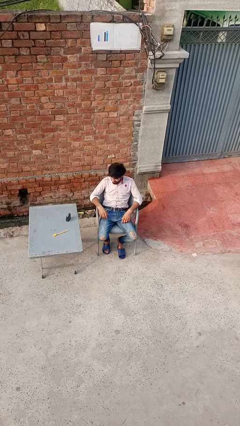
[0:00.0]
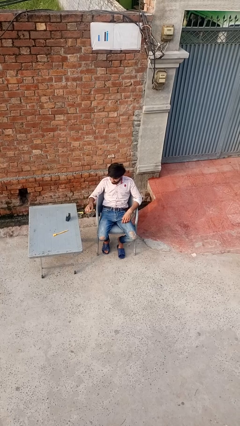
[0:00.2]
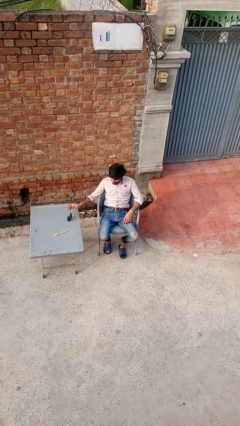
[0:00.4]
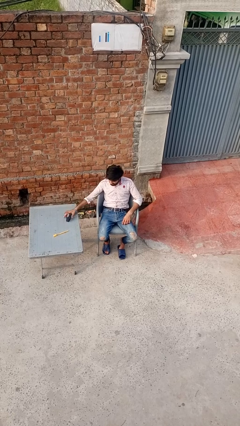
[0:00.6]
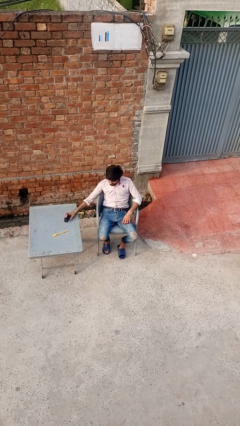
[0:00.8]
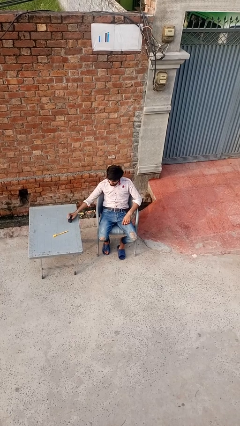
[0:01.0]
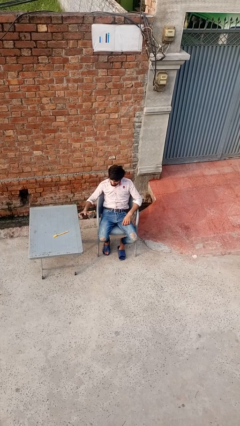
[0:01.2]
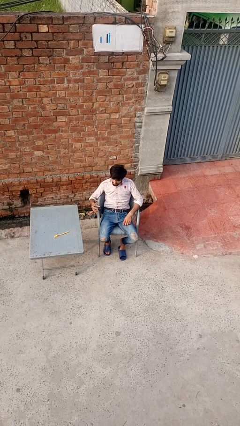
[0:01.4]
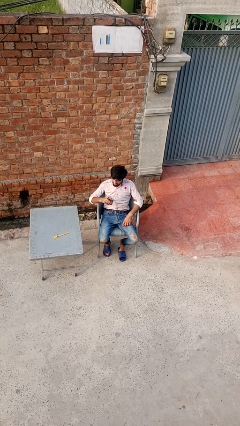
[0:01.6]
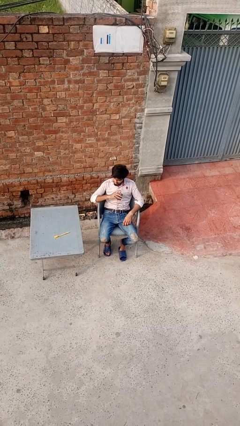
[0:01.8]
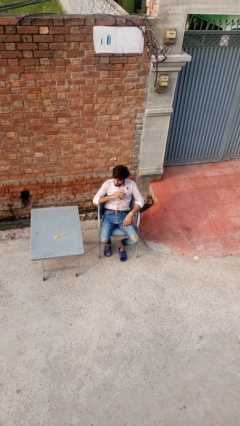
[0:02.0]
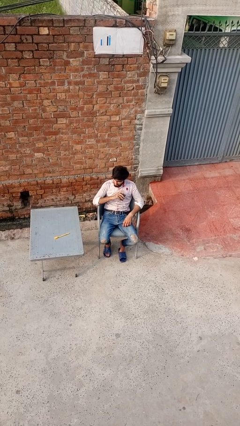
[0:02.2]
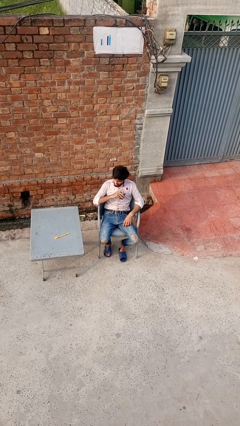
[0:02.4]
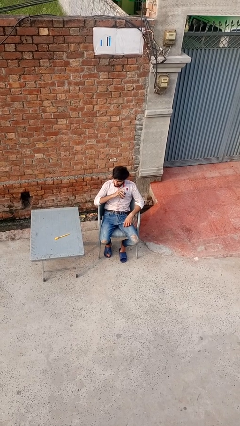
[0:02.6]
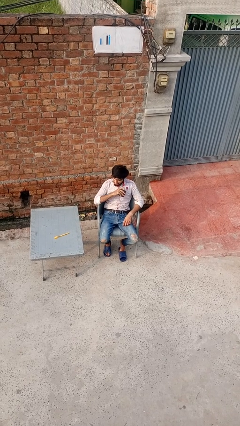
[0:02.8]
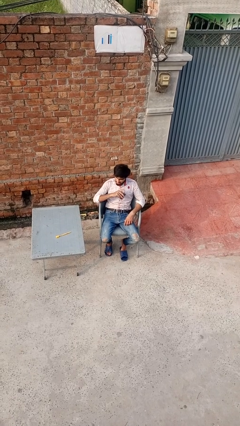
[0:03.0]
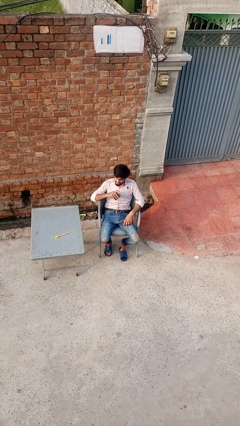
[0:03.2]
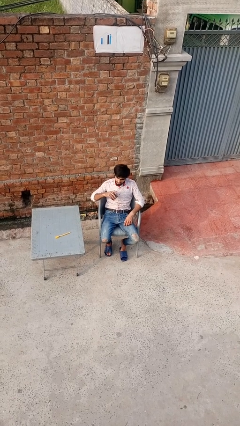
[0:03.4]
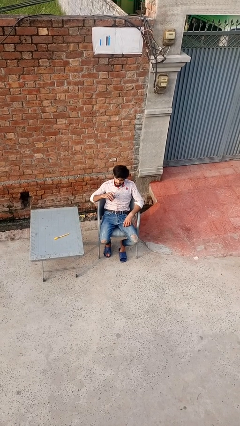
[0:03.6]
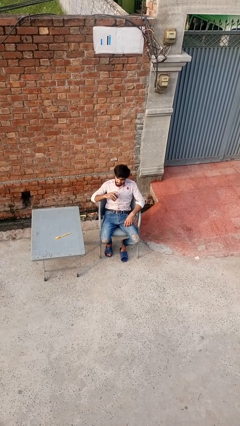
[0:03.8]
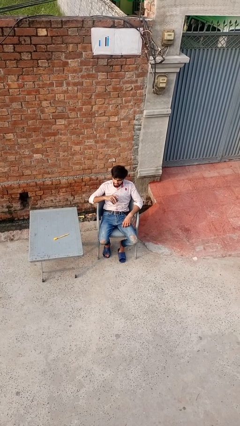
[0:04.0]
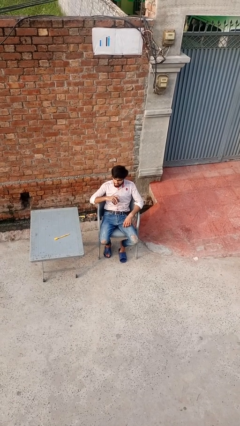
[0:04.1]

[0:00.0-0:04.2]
person applies deodorant

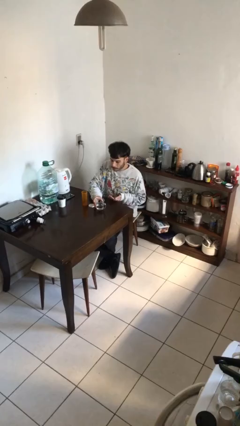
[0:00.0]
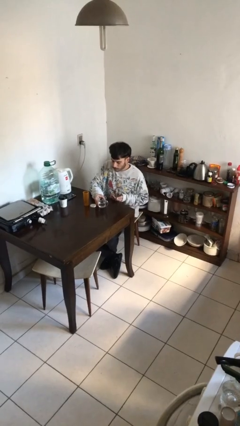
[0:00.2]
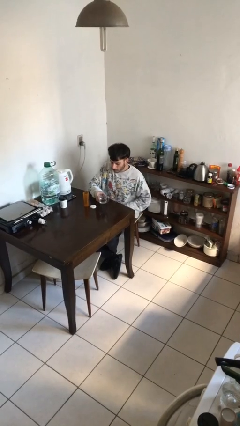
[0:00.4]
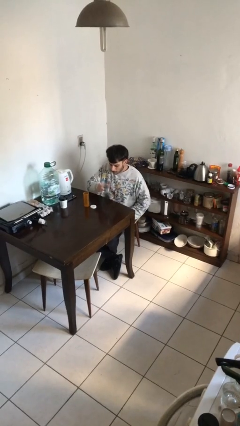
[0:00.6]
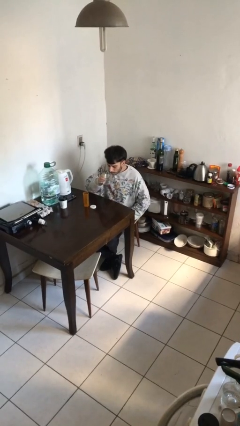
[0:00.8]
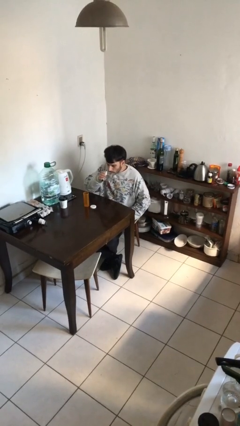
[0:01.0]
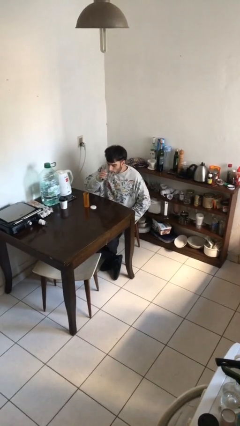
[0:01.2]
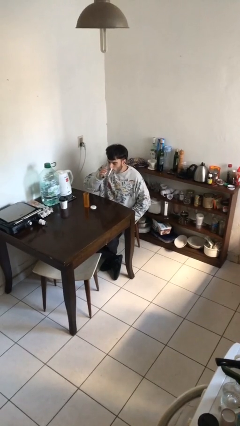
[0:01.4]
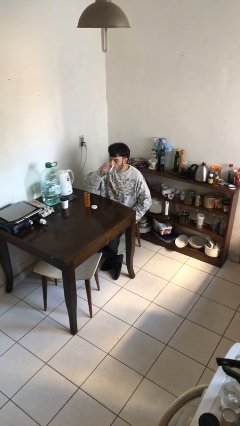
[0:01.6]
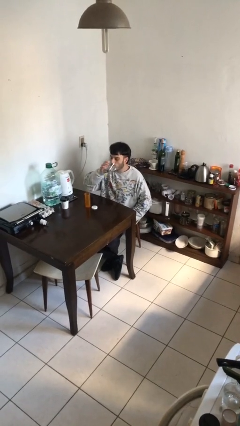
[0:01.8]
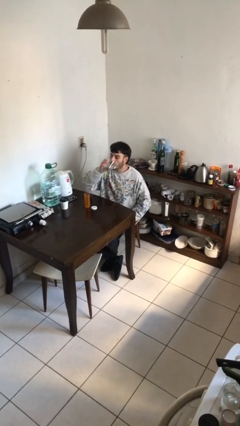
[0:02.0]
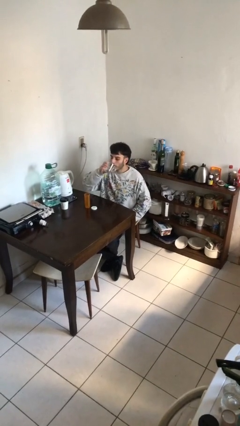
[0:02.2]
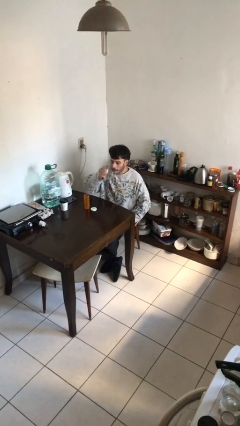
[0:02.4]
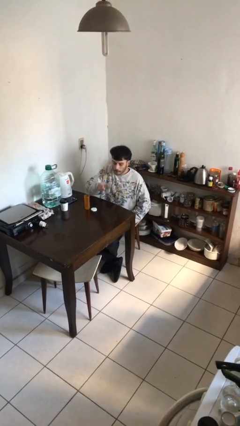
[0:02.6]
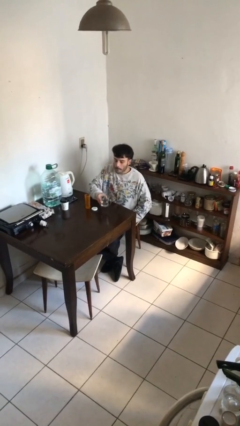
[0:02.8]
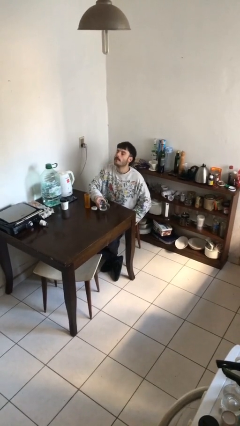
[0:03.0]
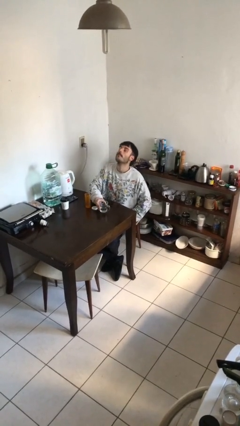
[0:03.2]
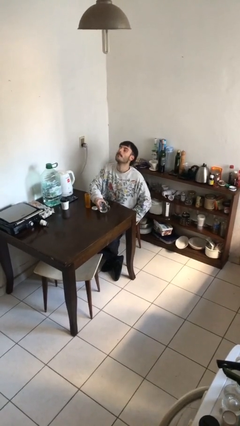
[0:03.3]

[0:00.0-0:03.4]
person drinks from cup

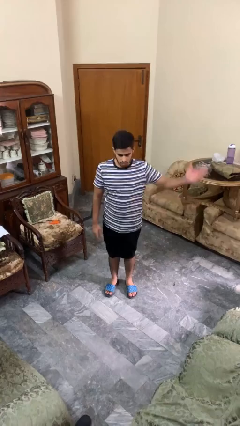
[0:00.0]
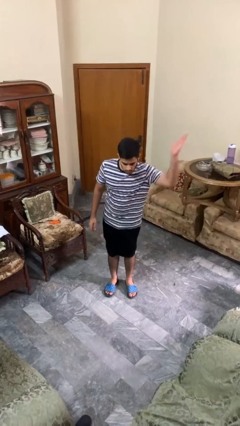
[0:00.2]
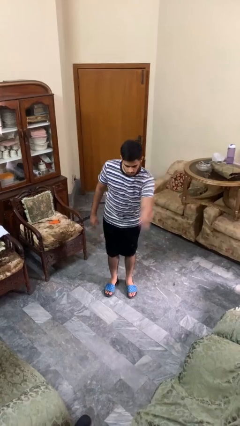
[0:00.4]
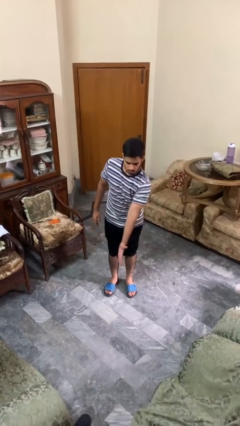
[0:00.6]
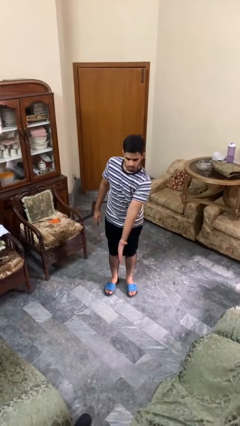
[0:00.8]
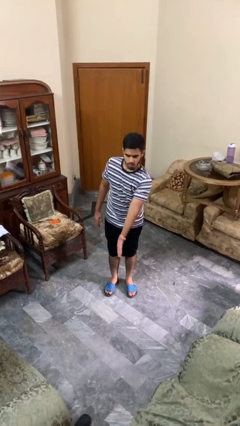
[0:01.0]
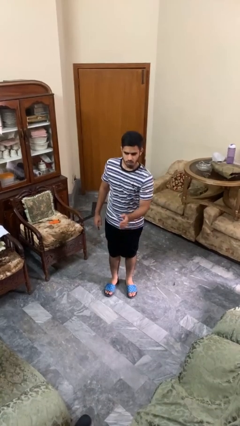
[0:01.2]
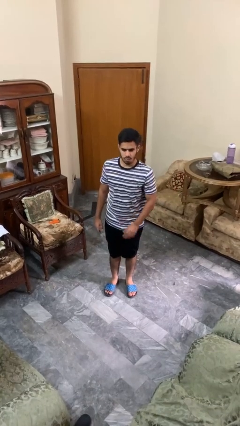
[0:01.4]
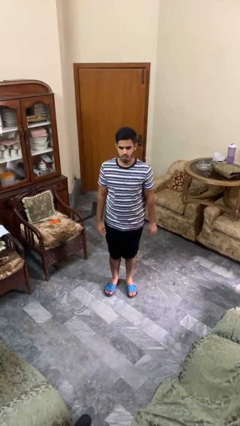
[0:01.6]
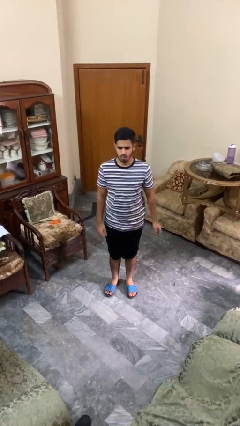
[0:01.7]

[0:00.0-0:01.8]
person karate chop

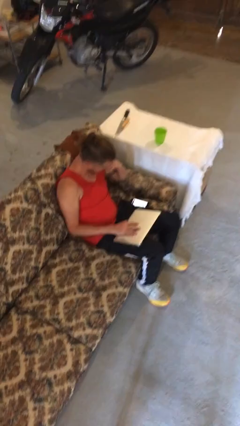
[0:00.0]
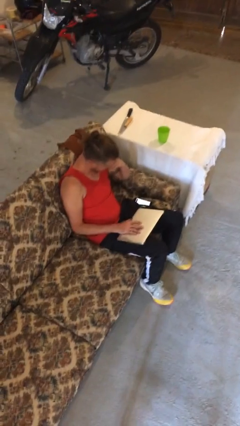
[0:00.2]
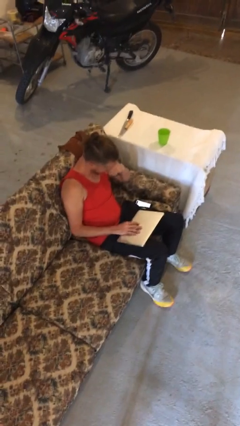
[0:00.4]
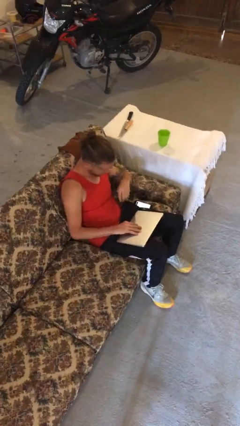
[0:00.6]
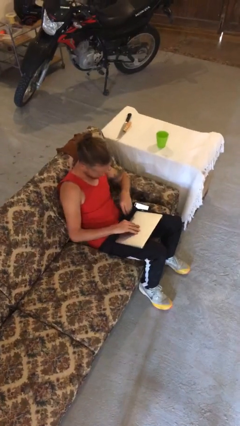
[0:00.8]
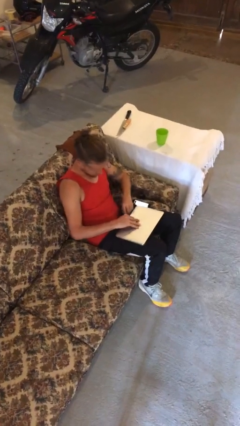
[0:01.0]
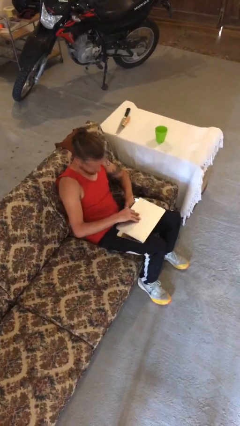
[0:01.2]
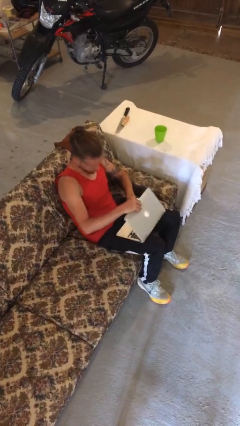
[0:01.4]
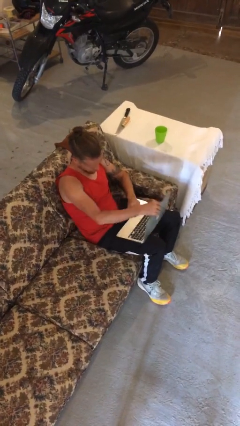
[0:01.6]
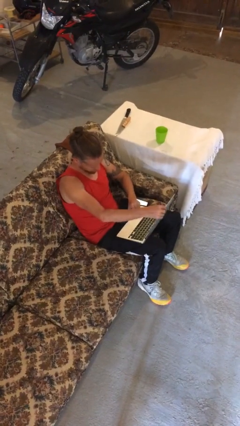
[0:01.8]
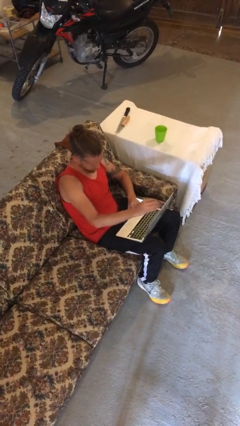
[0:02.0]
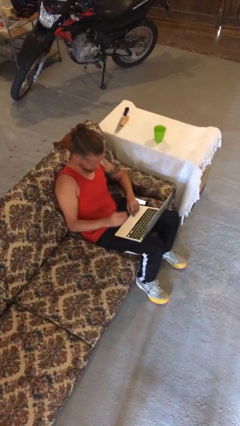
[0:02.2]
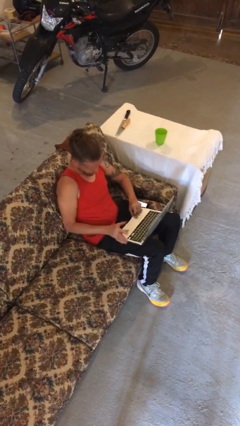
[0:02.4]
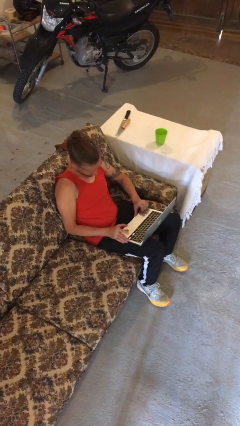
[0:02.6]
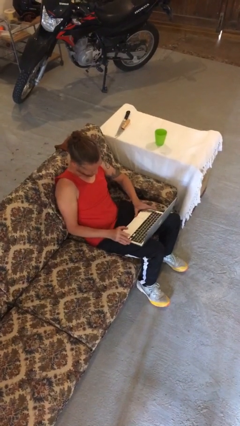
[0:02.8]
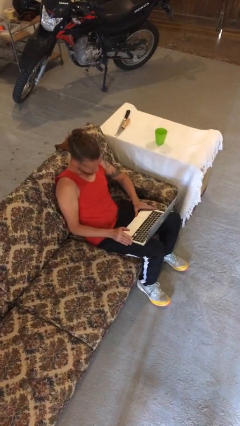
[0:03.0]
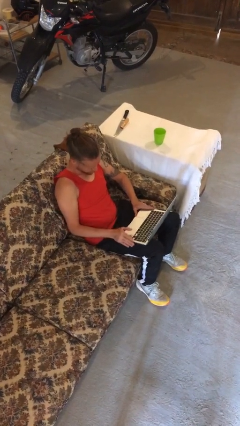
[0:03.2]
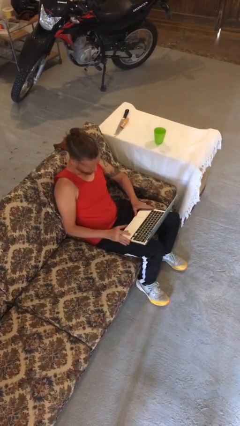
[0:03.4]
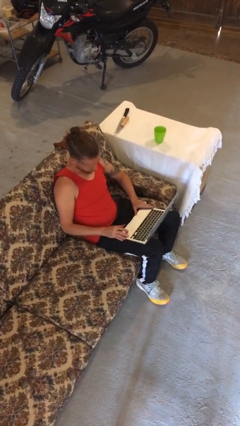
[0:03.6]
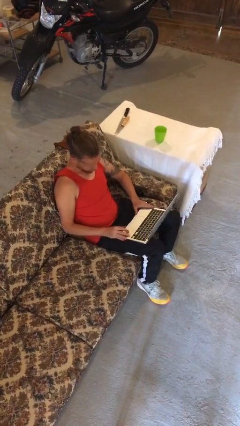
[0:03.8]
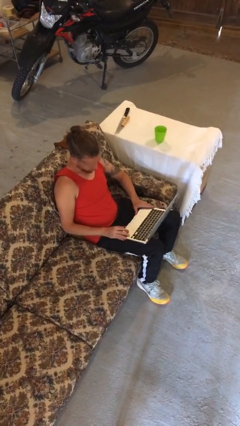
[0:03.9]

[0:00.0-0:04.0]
person opens laptop

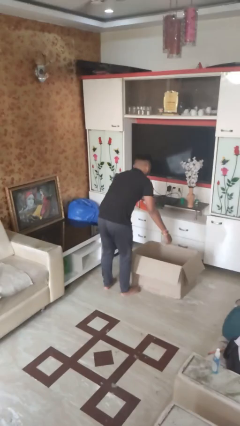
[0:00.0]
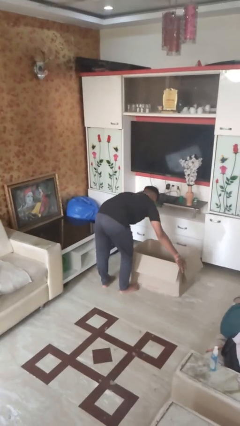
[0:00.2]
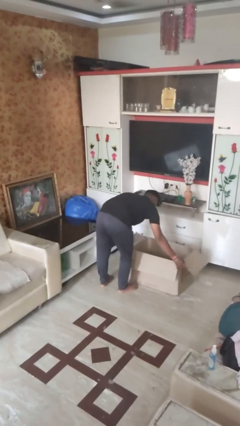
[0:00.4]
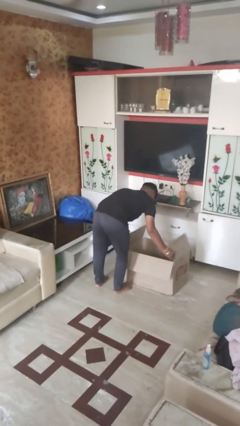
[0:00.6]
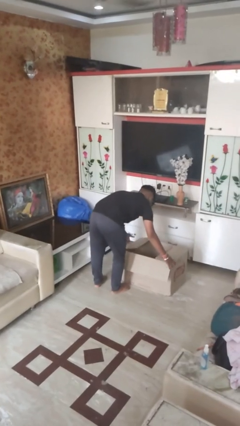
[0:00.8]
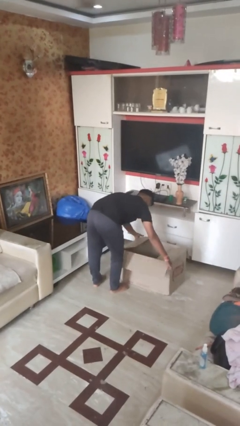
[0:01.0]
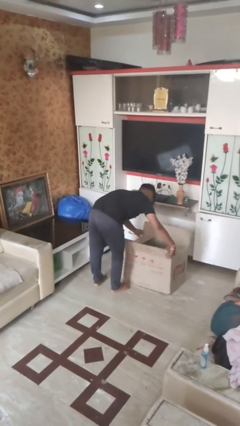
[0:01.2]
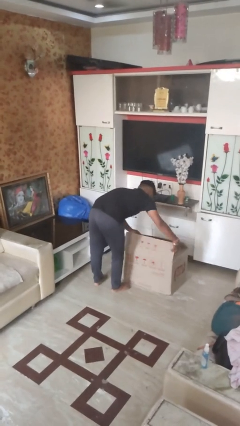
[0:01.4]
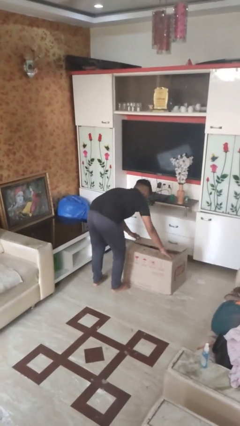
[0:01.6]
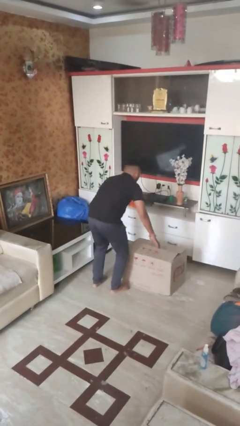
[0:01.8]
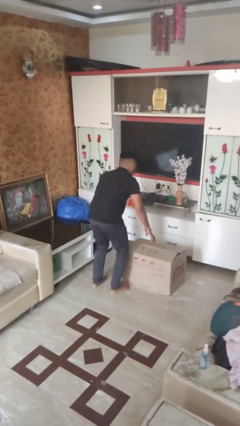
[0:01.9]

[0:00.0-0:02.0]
person closes box

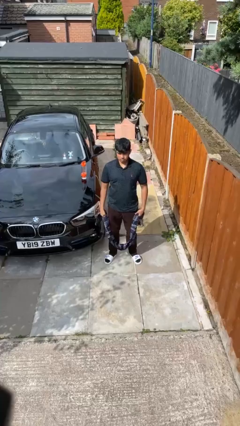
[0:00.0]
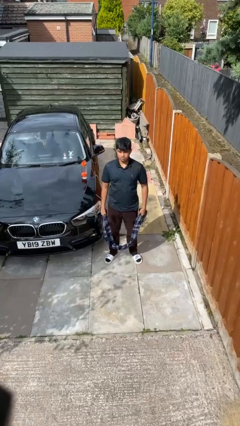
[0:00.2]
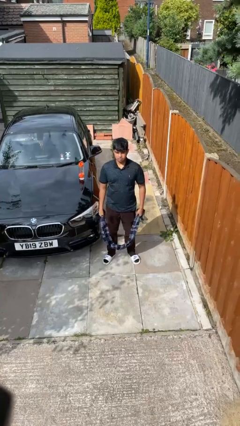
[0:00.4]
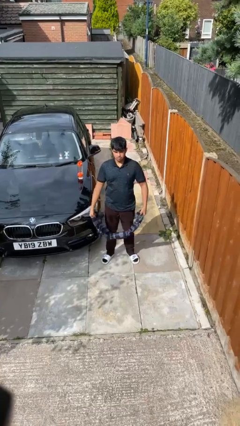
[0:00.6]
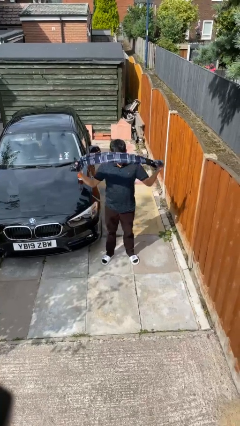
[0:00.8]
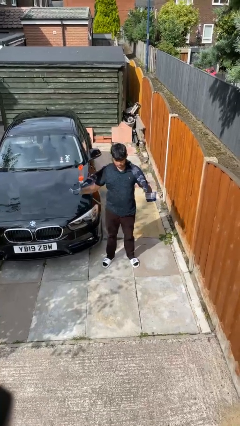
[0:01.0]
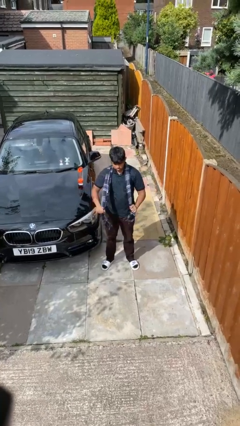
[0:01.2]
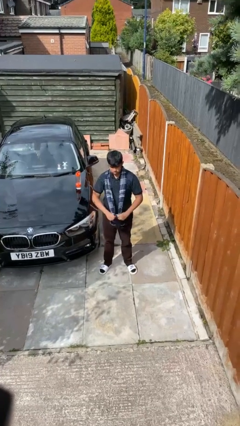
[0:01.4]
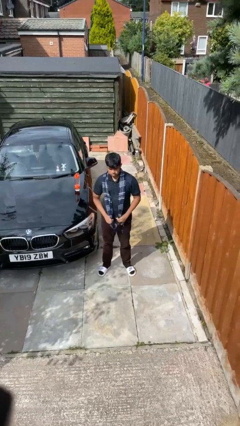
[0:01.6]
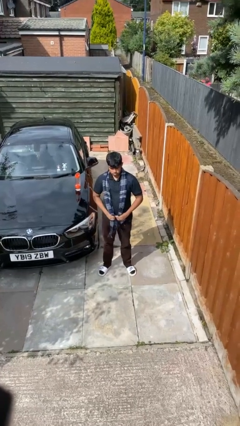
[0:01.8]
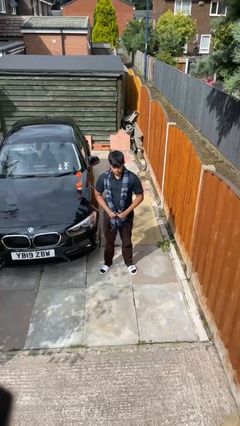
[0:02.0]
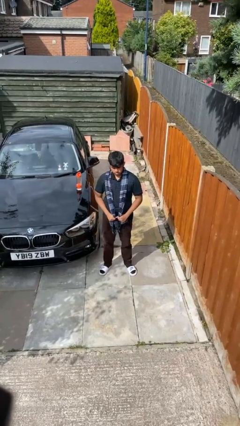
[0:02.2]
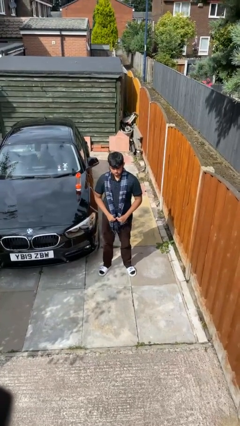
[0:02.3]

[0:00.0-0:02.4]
person puts on scarf

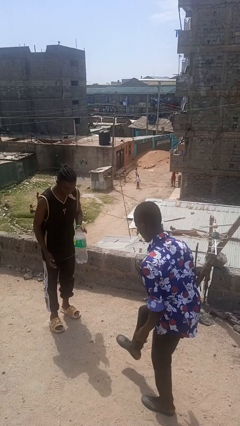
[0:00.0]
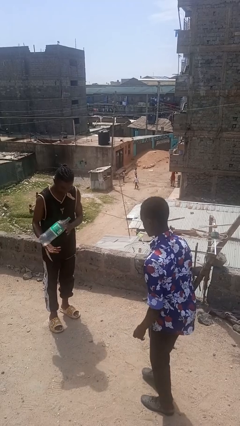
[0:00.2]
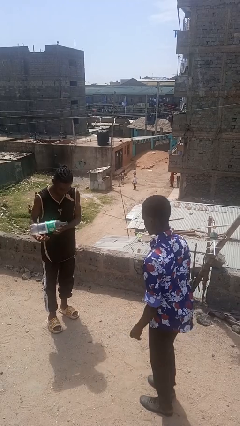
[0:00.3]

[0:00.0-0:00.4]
person kicks object to person
